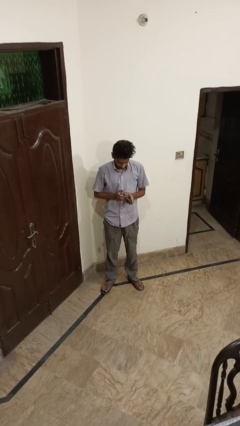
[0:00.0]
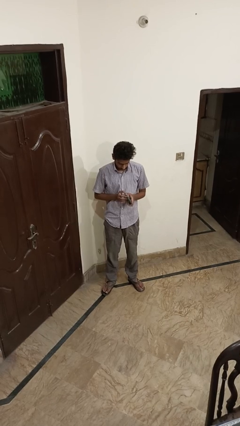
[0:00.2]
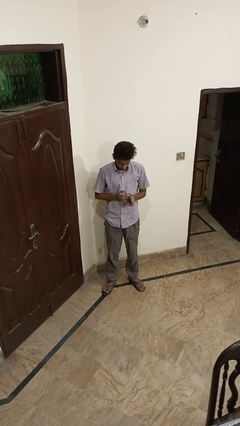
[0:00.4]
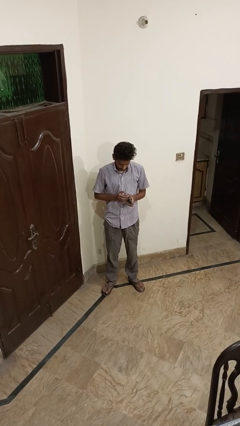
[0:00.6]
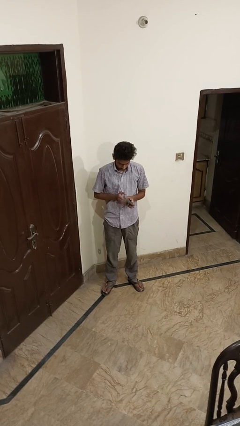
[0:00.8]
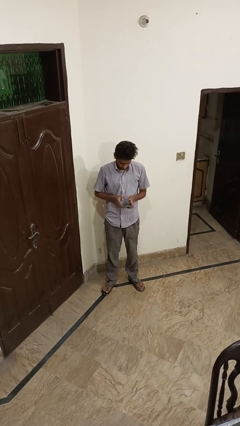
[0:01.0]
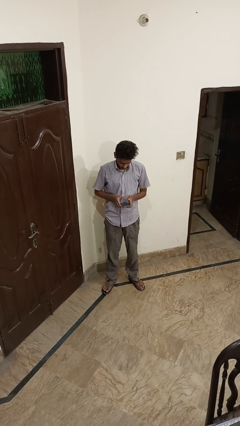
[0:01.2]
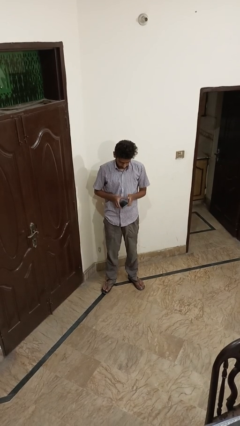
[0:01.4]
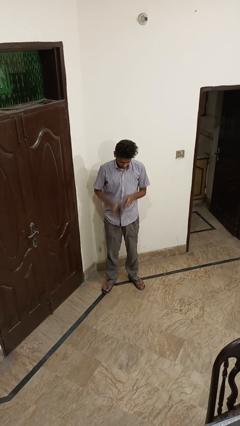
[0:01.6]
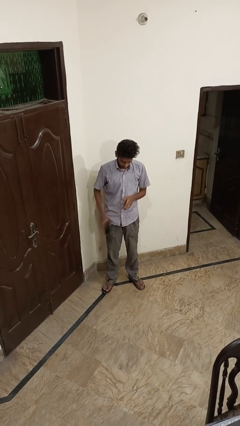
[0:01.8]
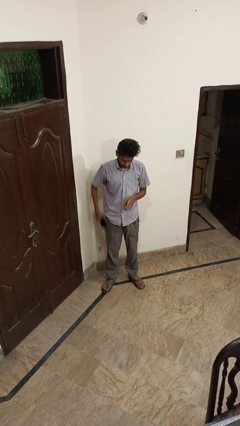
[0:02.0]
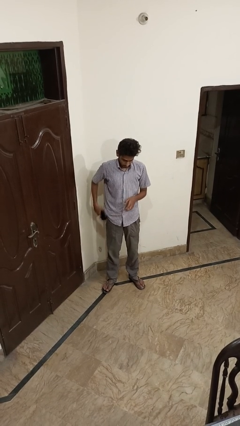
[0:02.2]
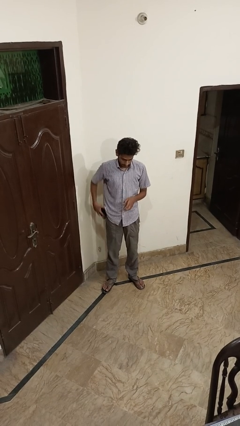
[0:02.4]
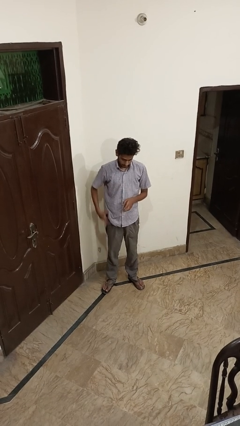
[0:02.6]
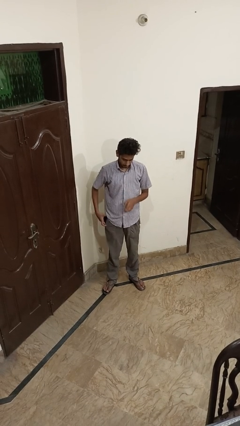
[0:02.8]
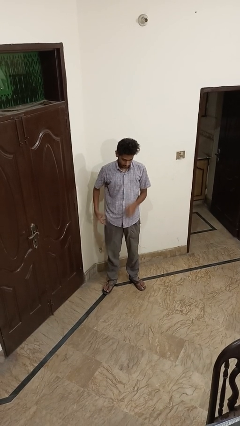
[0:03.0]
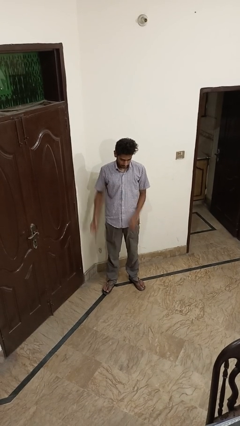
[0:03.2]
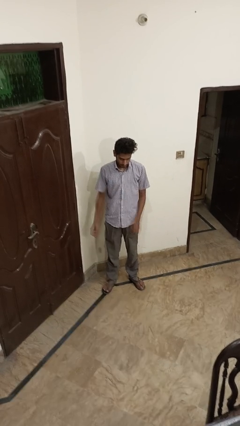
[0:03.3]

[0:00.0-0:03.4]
person puts phone into pocket

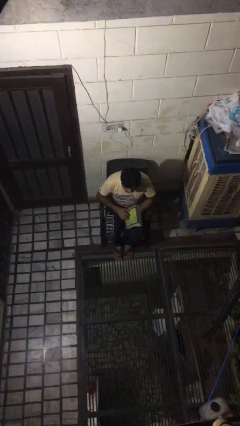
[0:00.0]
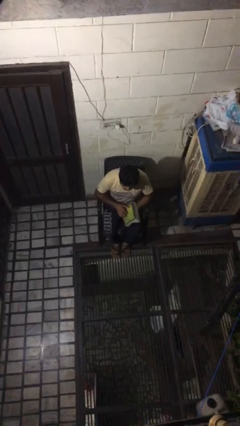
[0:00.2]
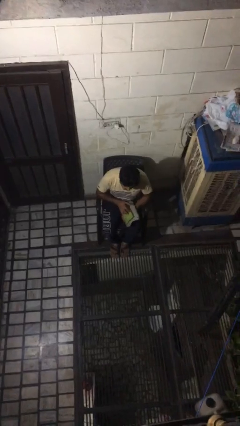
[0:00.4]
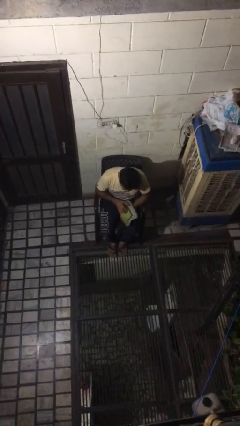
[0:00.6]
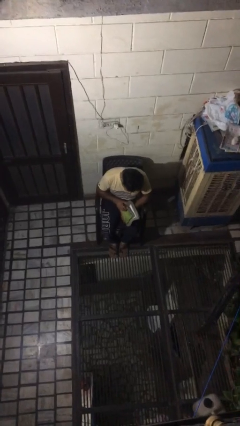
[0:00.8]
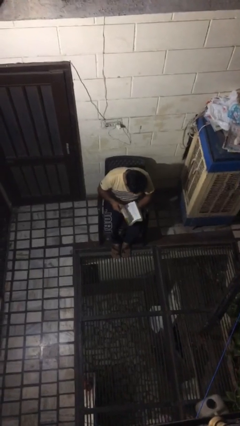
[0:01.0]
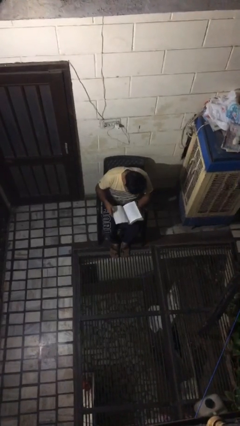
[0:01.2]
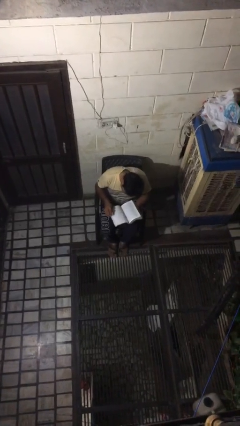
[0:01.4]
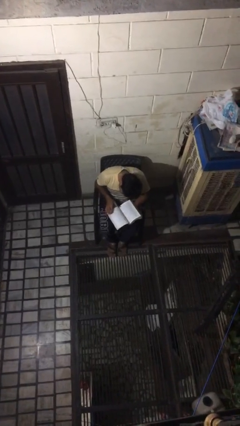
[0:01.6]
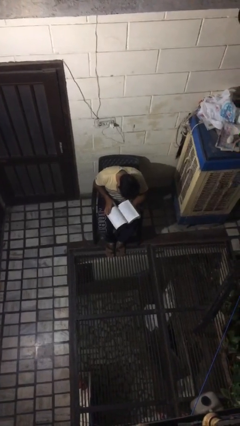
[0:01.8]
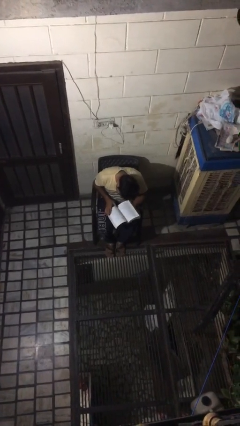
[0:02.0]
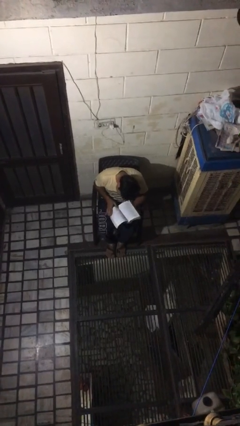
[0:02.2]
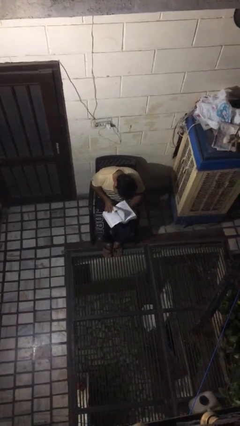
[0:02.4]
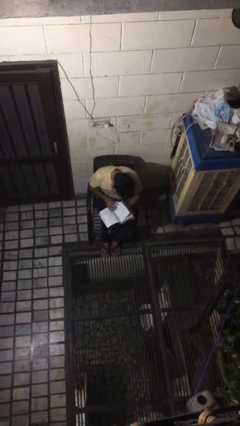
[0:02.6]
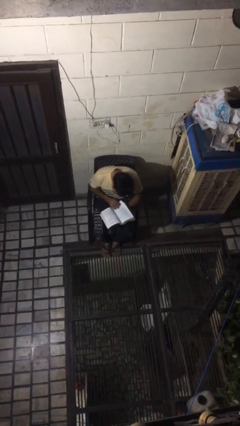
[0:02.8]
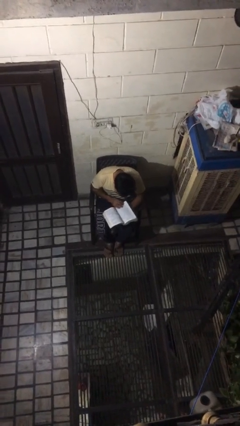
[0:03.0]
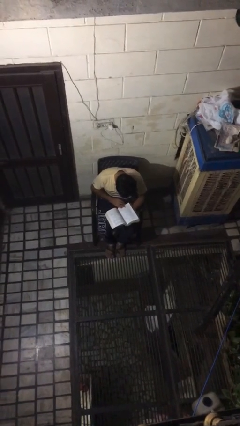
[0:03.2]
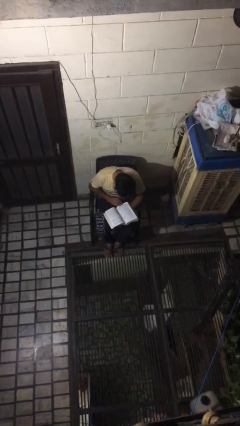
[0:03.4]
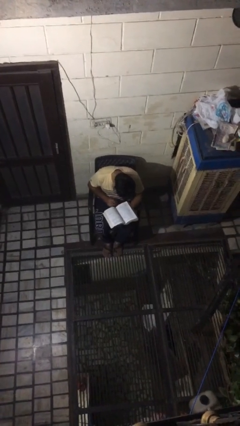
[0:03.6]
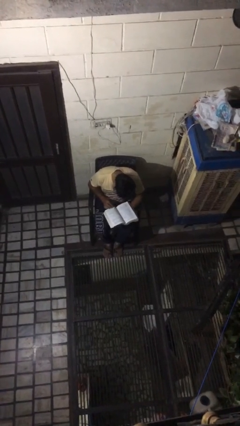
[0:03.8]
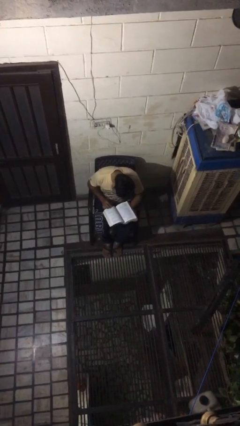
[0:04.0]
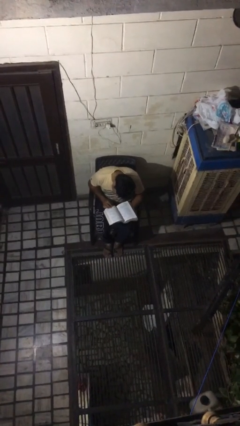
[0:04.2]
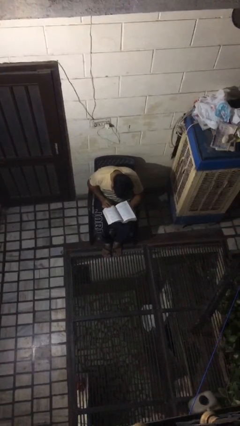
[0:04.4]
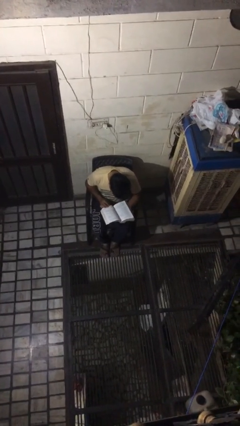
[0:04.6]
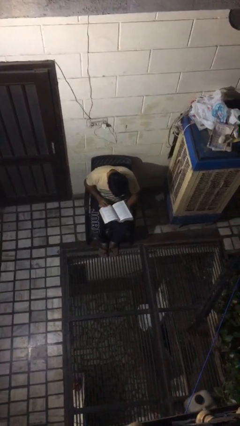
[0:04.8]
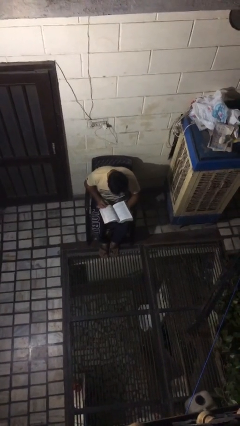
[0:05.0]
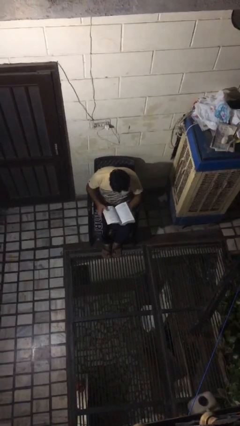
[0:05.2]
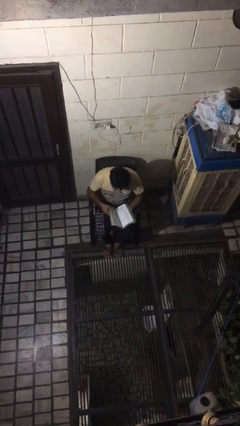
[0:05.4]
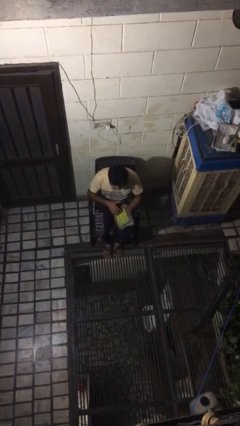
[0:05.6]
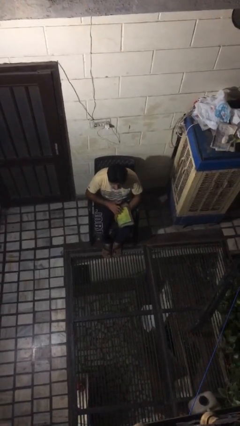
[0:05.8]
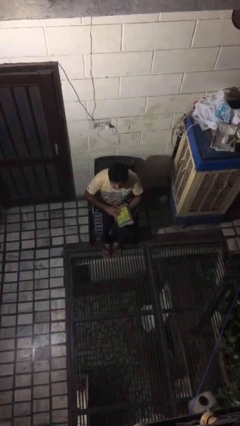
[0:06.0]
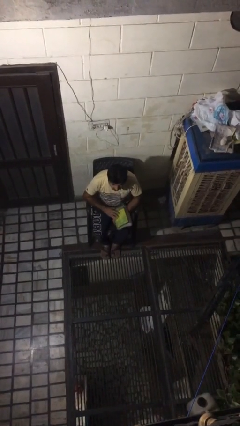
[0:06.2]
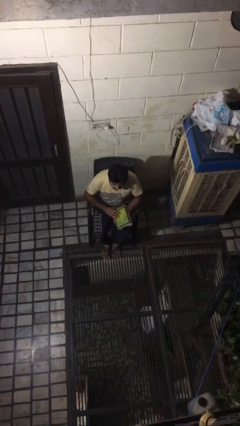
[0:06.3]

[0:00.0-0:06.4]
person reads book

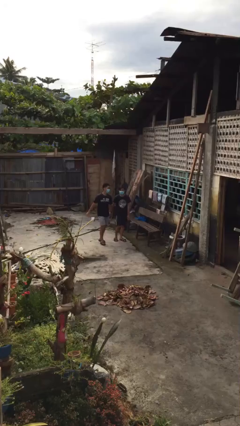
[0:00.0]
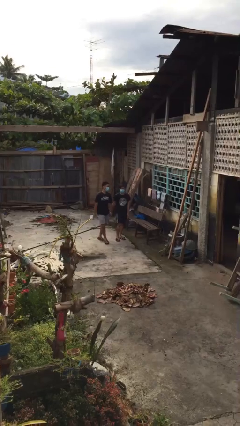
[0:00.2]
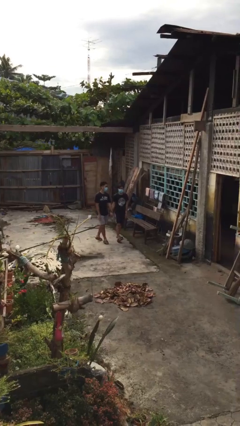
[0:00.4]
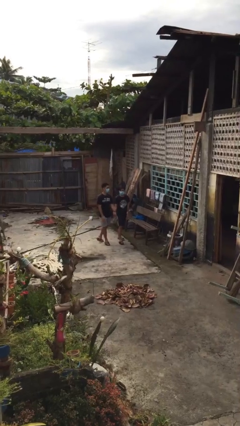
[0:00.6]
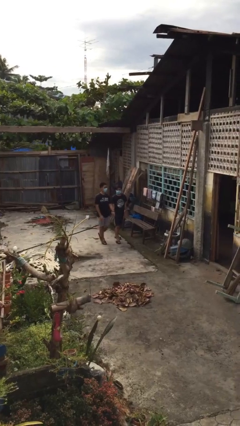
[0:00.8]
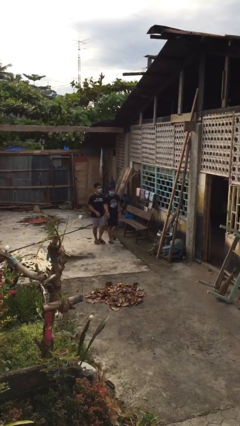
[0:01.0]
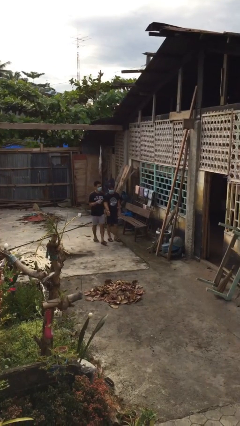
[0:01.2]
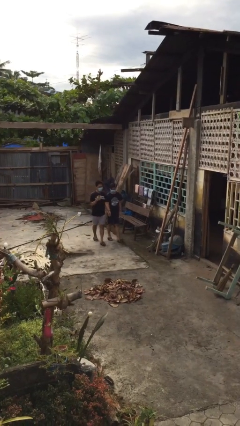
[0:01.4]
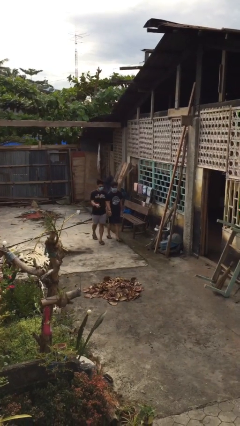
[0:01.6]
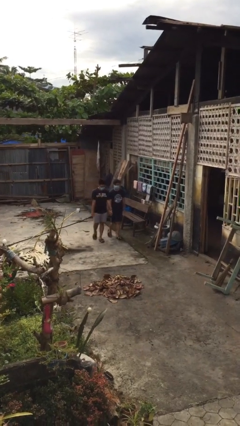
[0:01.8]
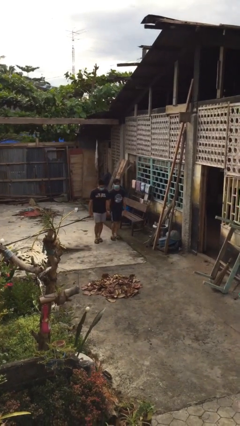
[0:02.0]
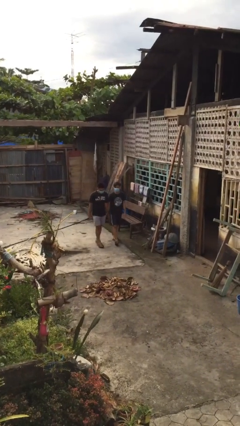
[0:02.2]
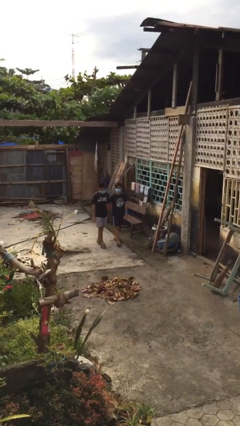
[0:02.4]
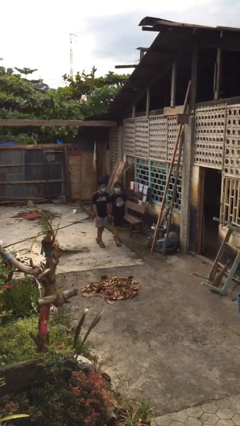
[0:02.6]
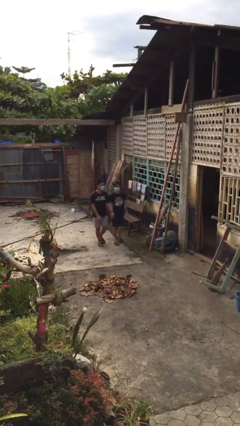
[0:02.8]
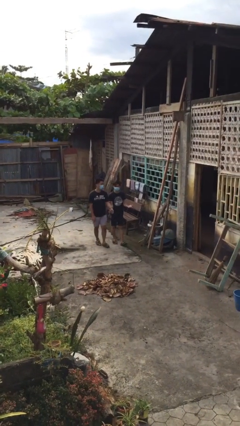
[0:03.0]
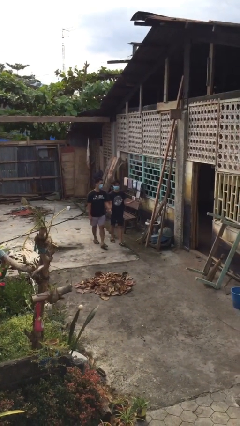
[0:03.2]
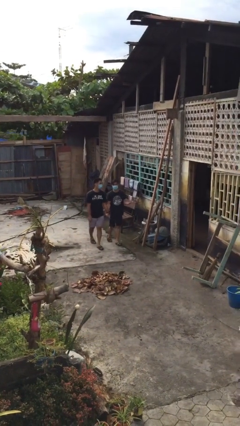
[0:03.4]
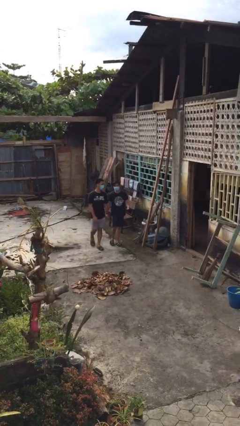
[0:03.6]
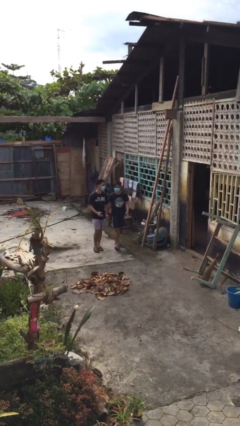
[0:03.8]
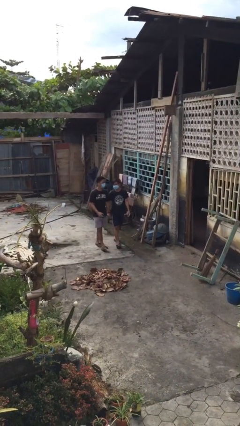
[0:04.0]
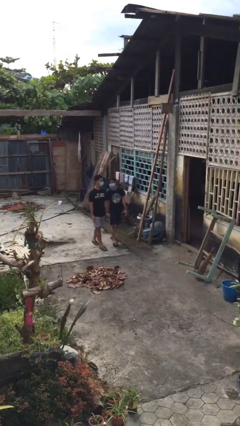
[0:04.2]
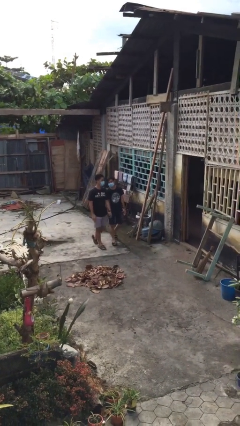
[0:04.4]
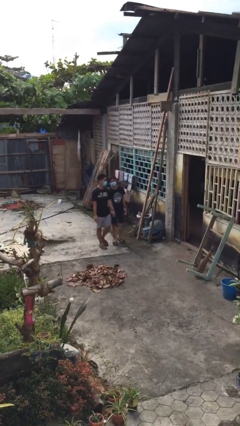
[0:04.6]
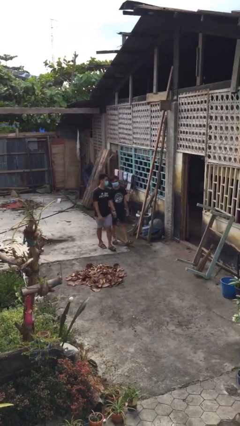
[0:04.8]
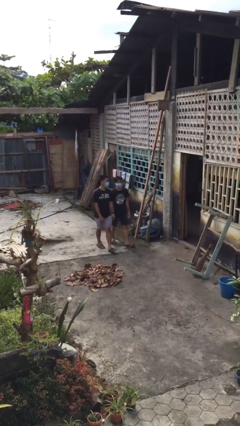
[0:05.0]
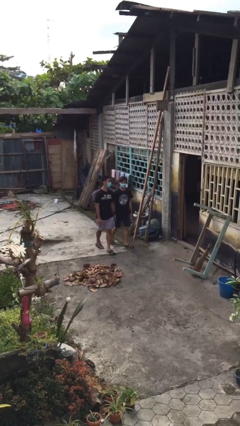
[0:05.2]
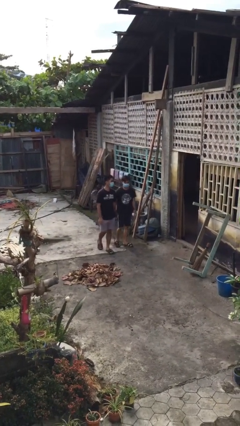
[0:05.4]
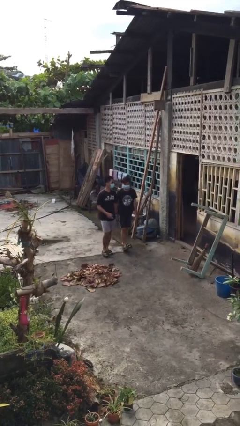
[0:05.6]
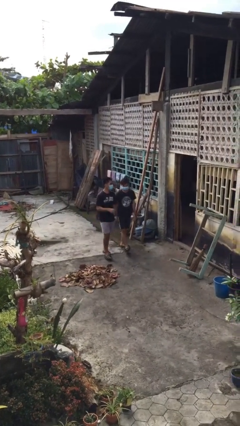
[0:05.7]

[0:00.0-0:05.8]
person holds hand

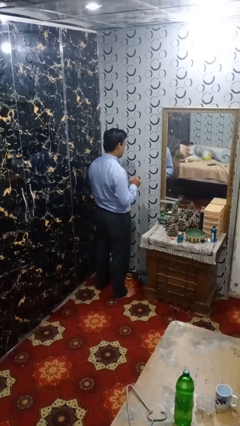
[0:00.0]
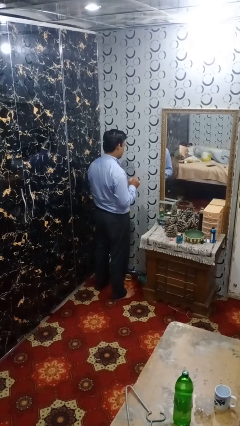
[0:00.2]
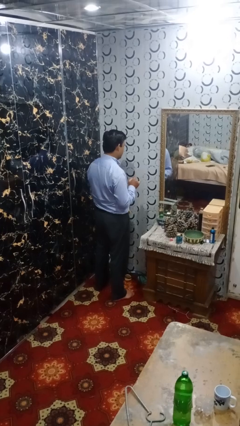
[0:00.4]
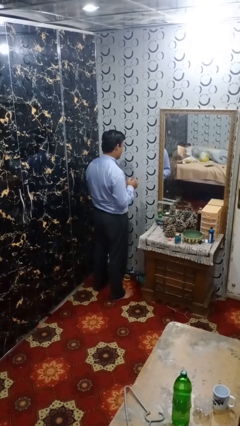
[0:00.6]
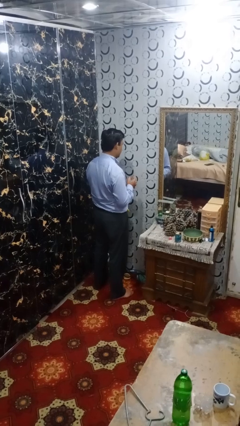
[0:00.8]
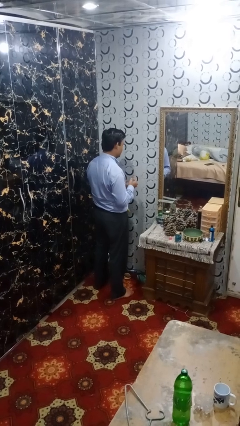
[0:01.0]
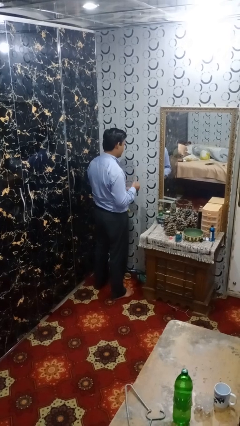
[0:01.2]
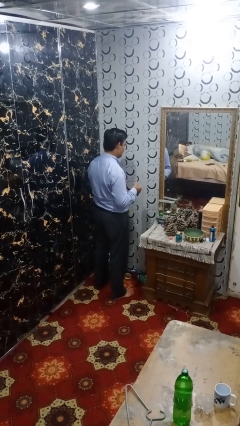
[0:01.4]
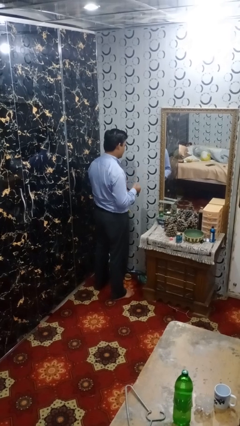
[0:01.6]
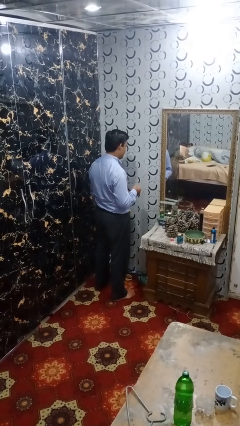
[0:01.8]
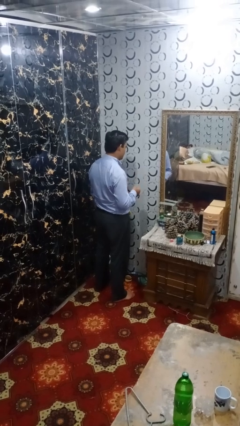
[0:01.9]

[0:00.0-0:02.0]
person takes off ring

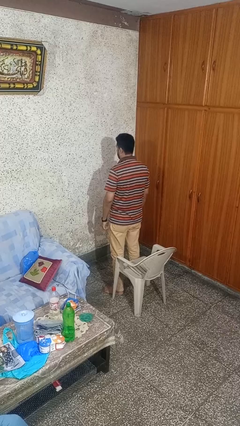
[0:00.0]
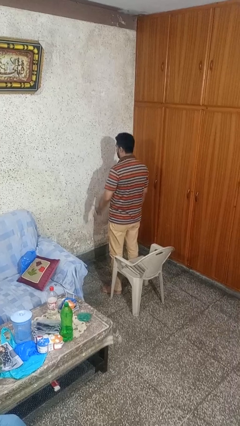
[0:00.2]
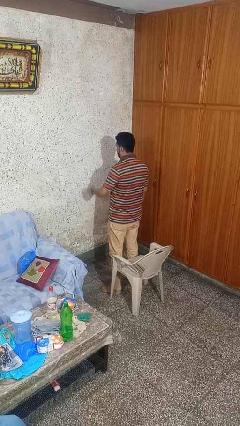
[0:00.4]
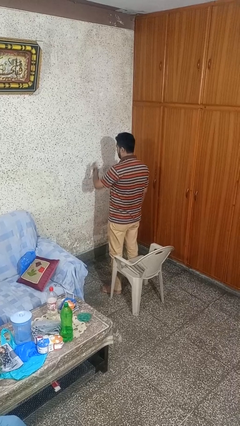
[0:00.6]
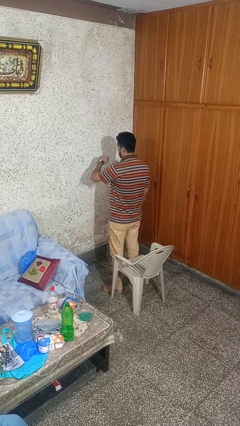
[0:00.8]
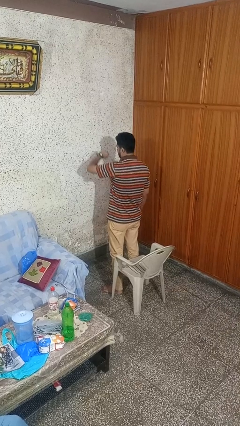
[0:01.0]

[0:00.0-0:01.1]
person looks at wristwatch
